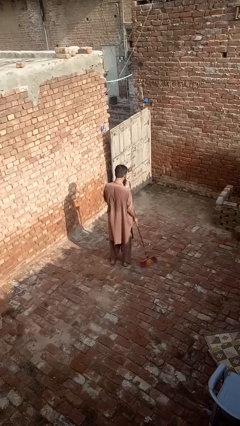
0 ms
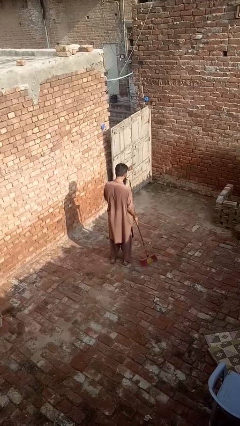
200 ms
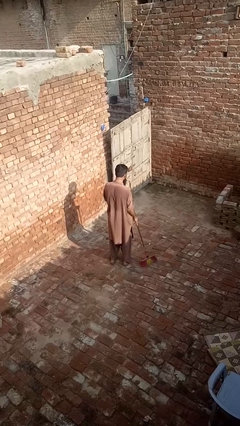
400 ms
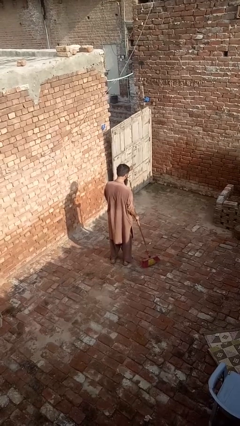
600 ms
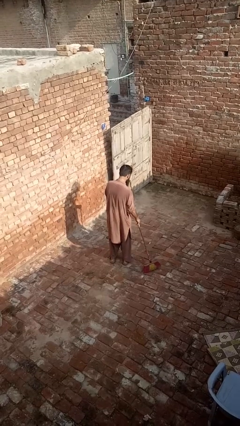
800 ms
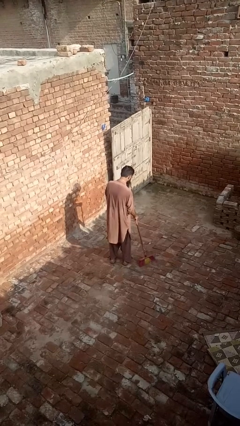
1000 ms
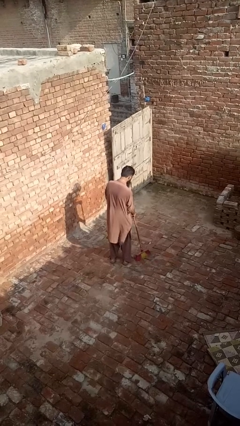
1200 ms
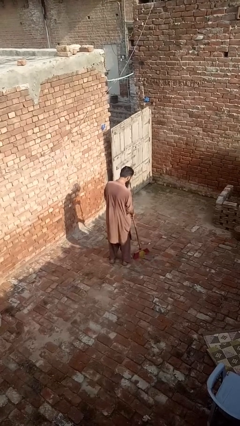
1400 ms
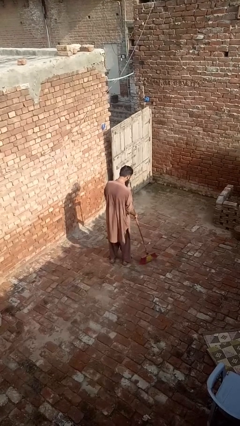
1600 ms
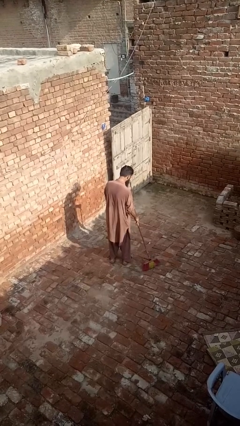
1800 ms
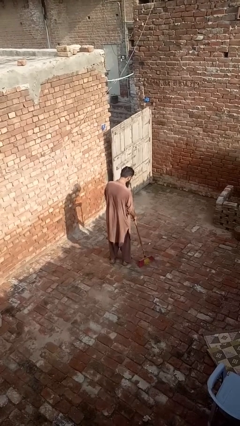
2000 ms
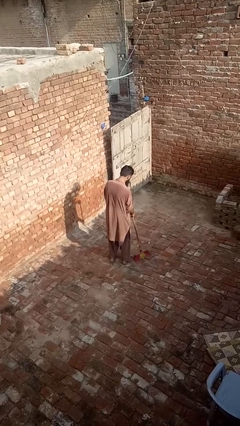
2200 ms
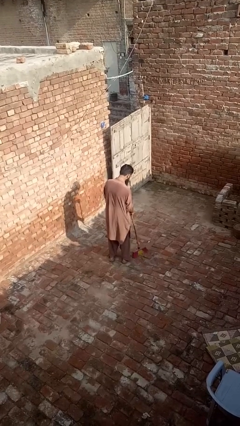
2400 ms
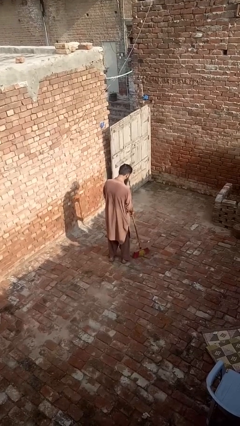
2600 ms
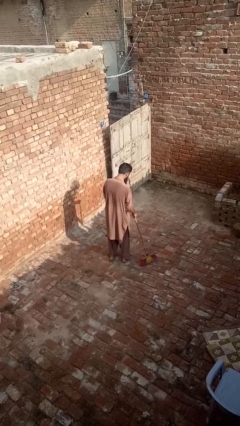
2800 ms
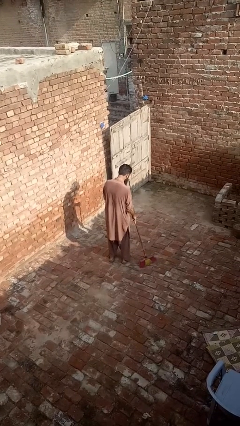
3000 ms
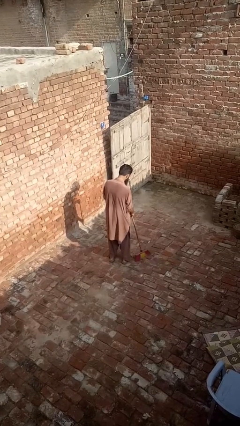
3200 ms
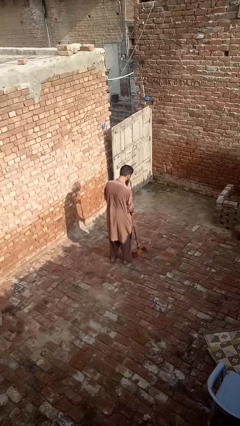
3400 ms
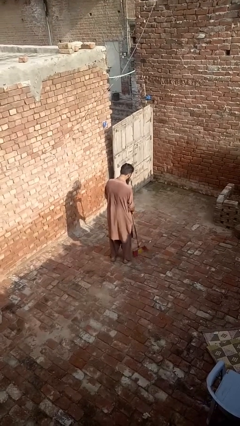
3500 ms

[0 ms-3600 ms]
person sweeps floor

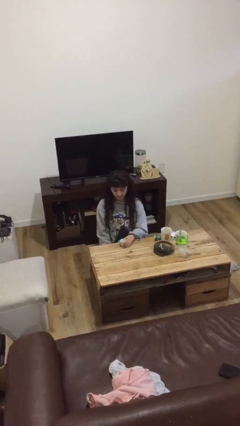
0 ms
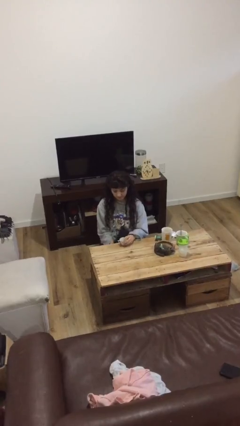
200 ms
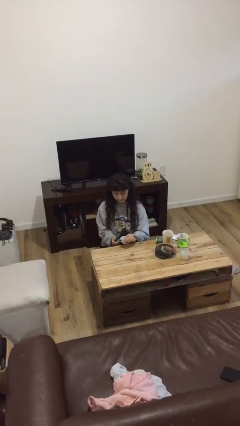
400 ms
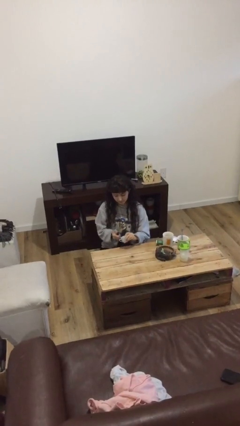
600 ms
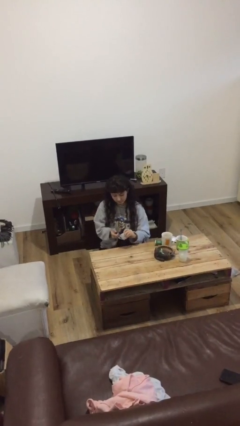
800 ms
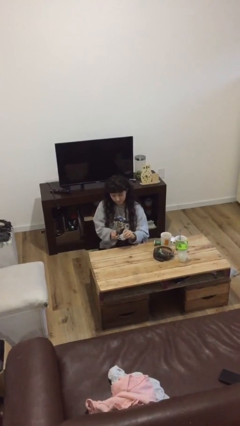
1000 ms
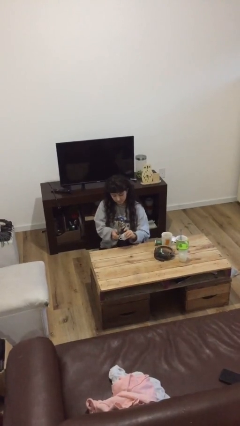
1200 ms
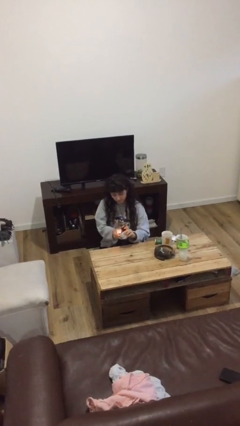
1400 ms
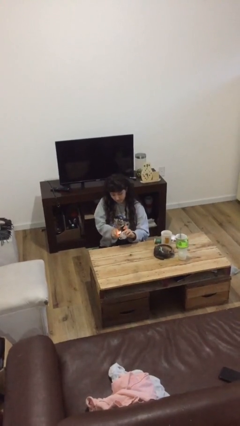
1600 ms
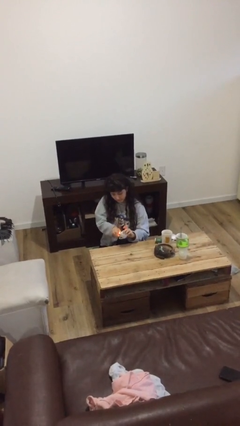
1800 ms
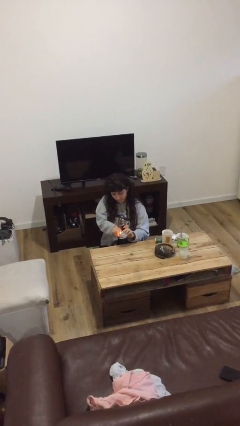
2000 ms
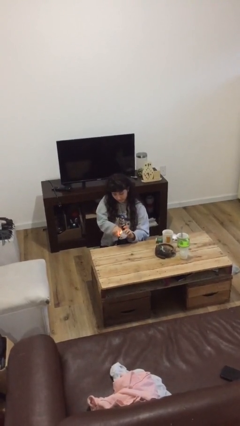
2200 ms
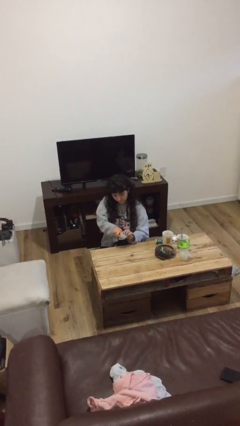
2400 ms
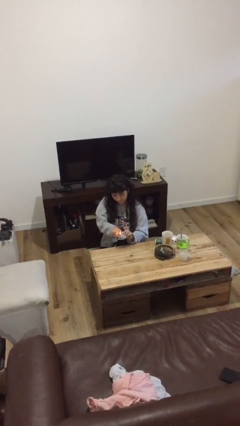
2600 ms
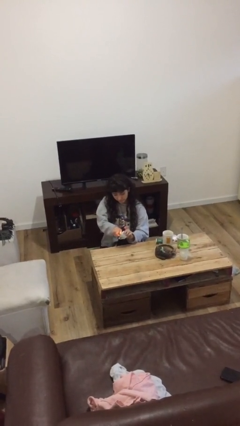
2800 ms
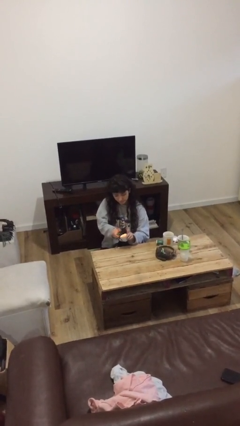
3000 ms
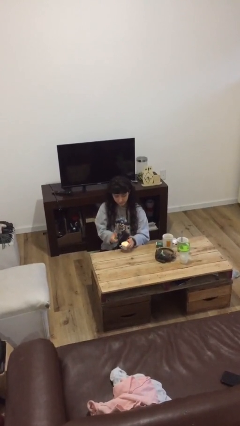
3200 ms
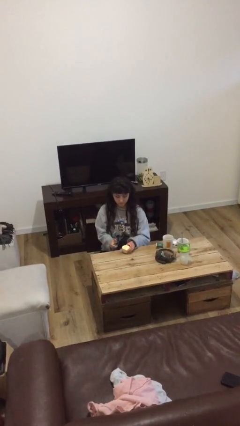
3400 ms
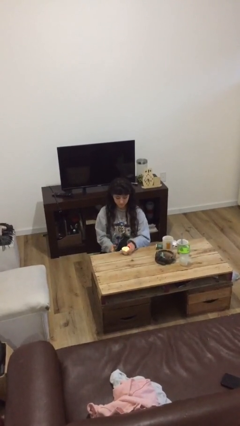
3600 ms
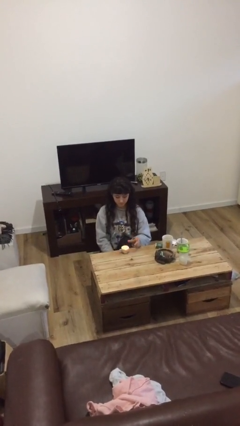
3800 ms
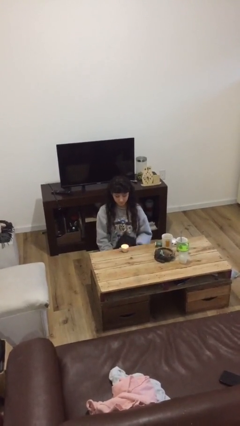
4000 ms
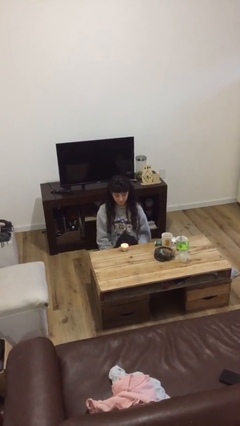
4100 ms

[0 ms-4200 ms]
person lights candle

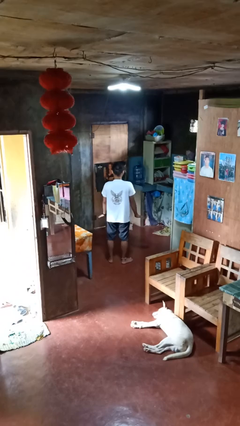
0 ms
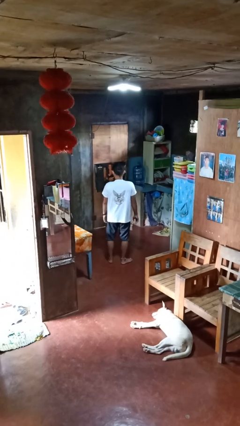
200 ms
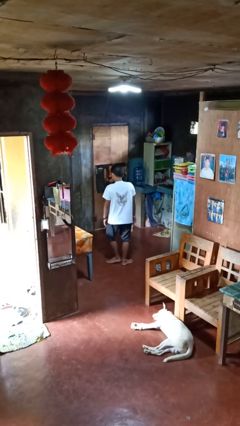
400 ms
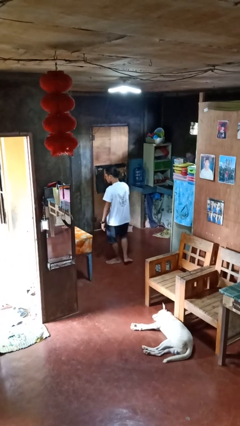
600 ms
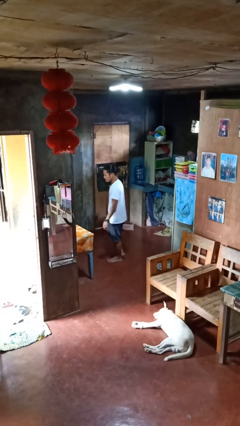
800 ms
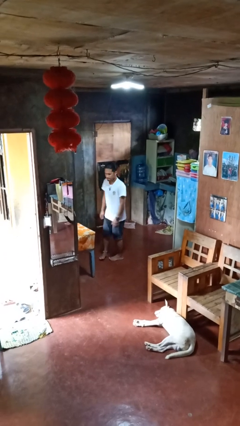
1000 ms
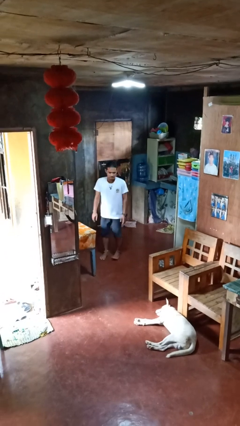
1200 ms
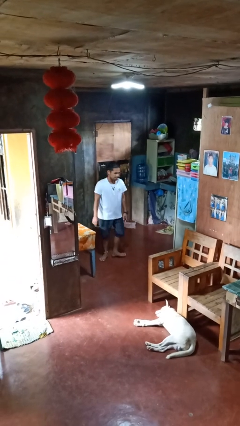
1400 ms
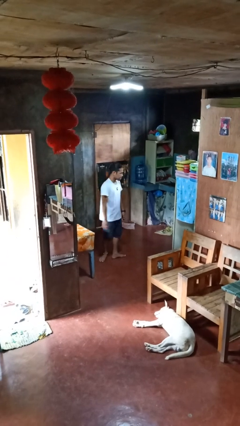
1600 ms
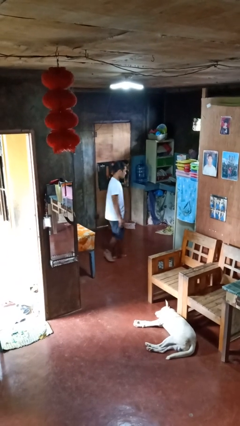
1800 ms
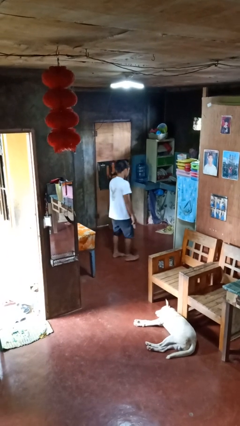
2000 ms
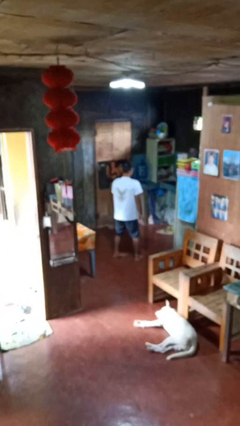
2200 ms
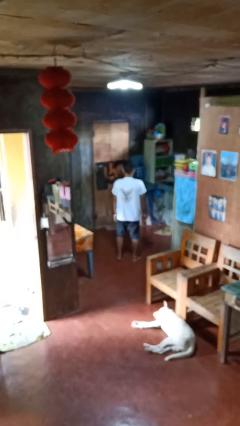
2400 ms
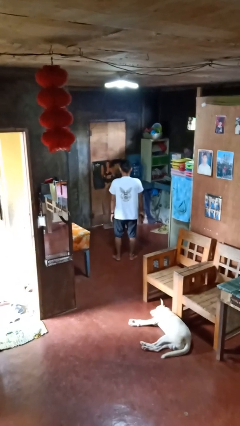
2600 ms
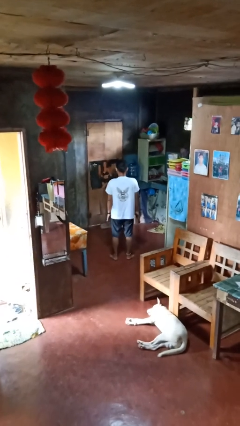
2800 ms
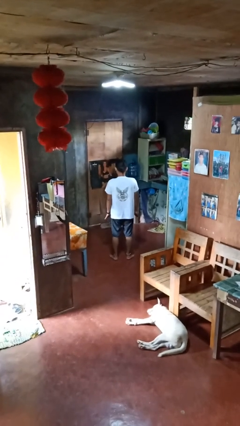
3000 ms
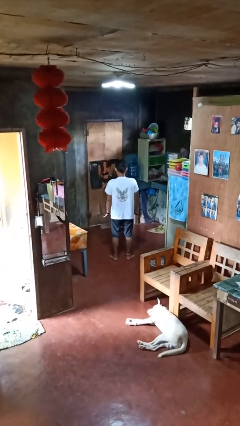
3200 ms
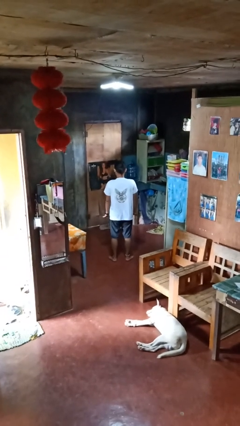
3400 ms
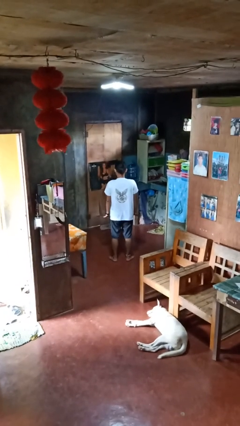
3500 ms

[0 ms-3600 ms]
person twirls

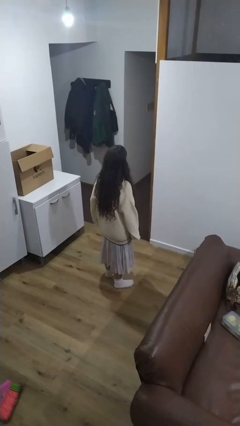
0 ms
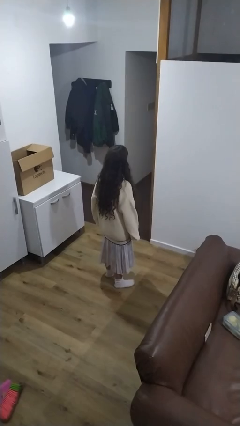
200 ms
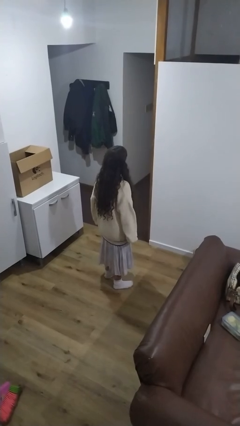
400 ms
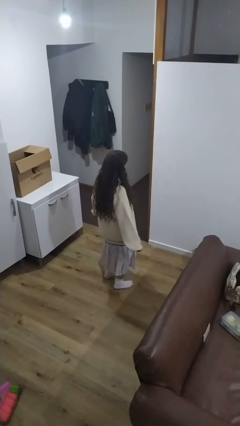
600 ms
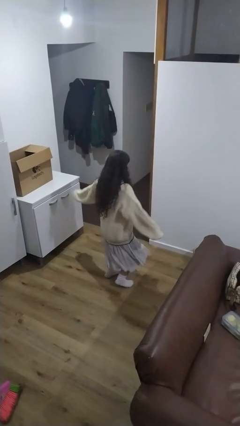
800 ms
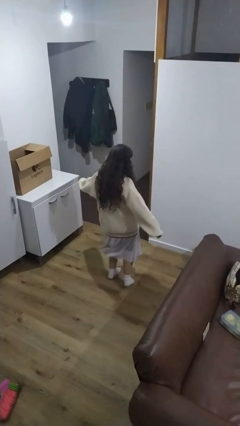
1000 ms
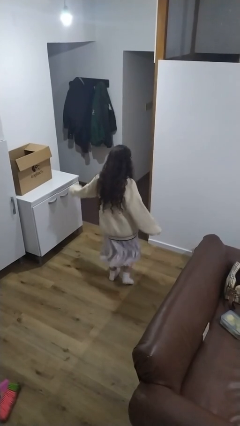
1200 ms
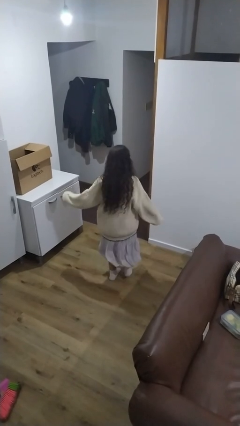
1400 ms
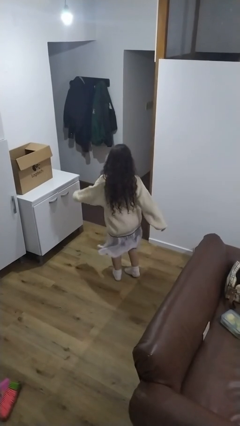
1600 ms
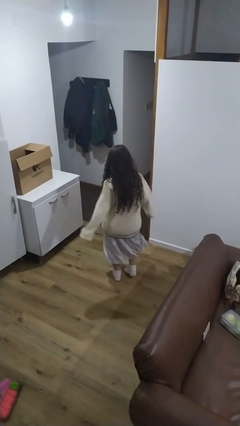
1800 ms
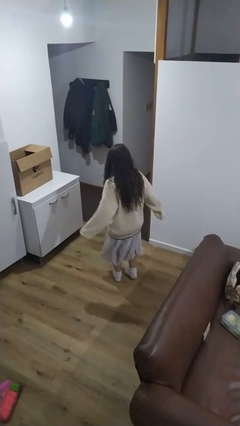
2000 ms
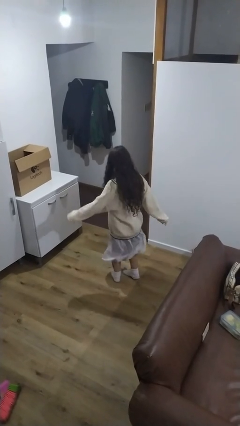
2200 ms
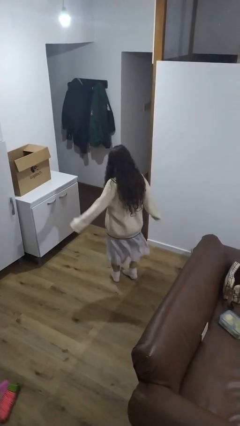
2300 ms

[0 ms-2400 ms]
person wiggles hips

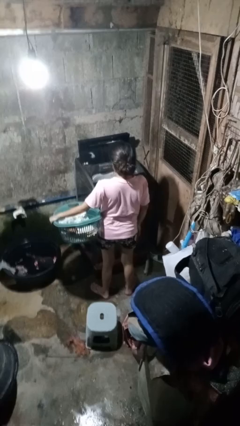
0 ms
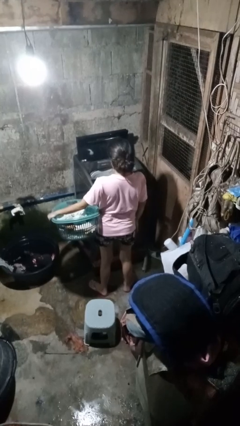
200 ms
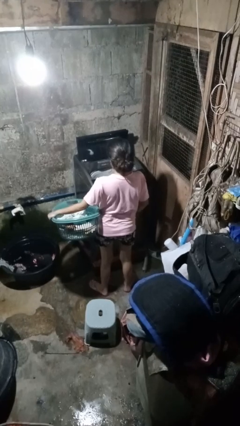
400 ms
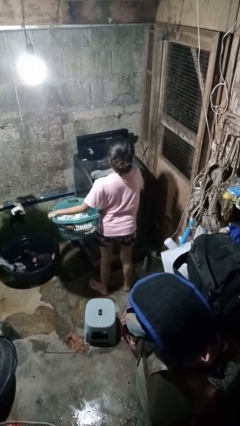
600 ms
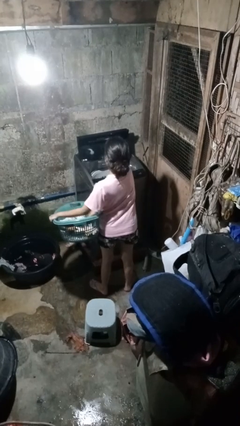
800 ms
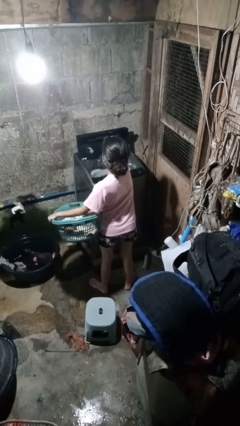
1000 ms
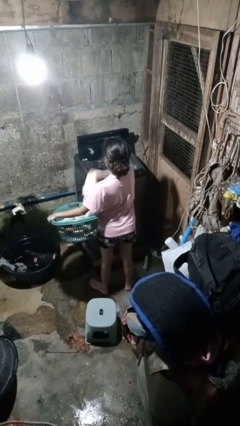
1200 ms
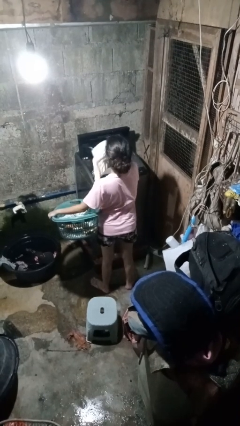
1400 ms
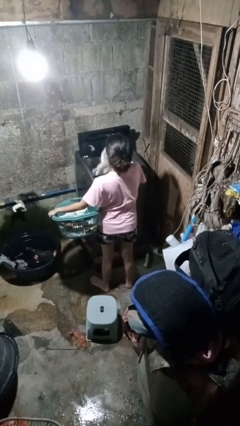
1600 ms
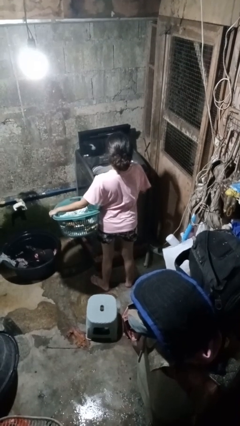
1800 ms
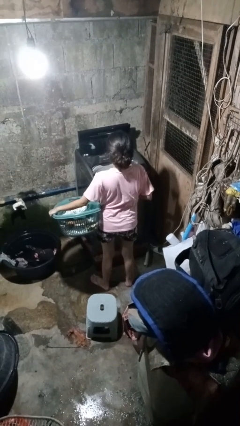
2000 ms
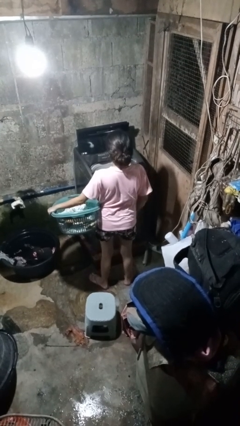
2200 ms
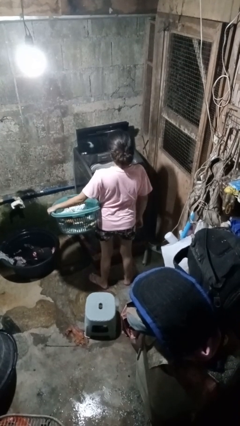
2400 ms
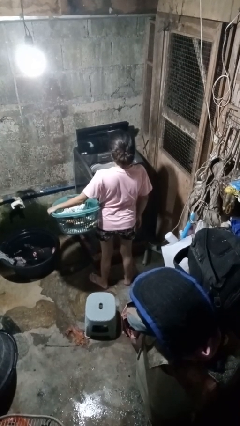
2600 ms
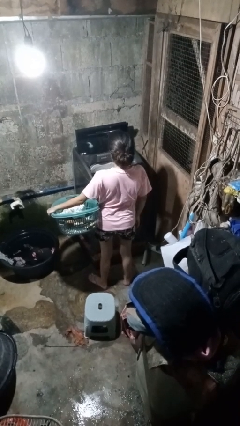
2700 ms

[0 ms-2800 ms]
person loads dryer

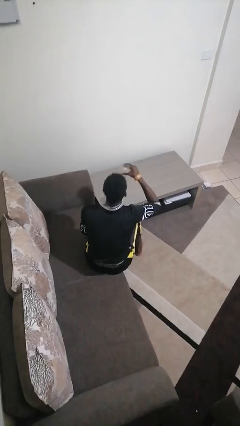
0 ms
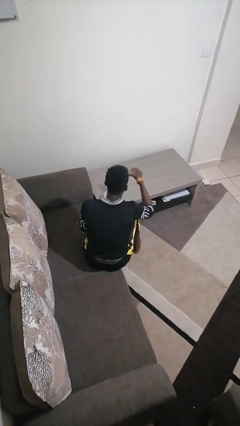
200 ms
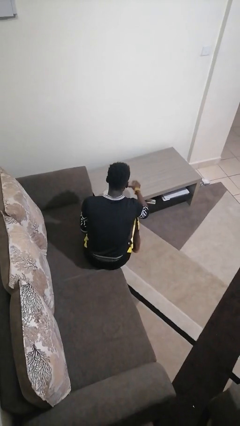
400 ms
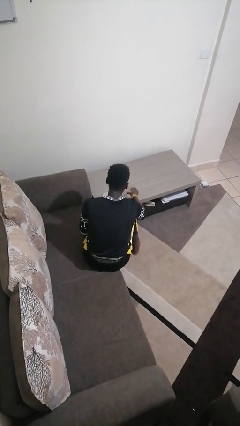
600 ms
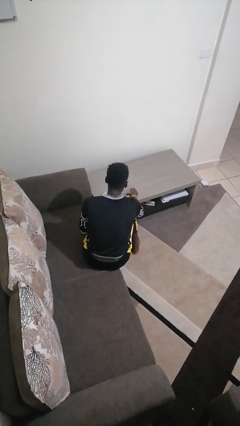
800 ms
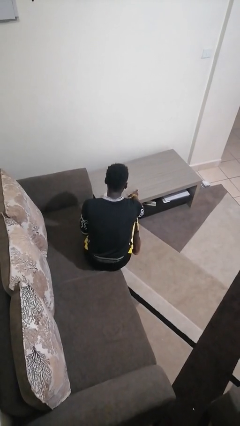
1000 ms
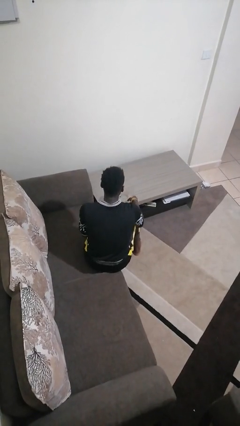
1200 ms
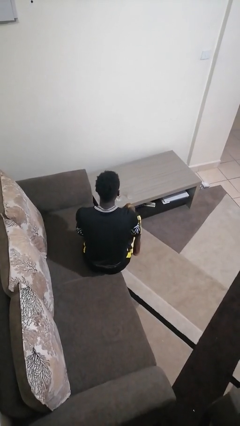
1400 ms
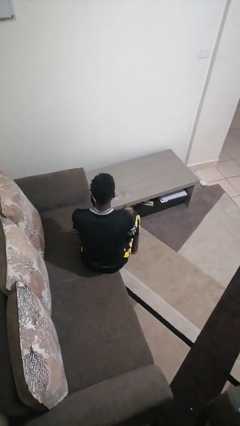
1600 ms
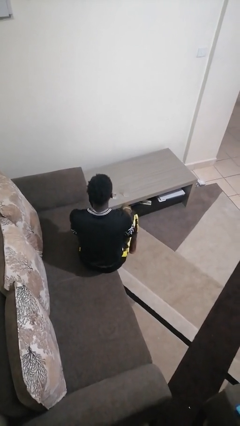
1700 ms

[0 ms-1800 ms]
person puts down object on table
